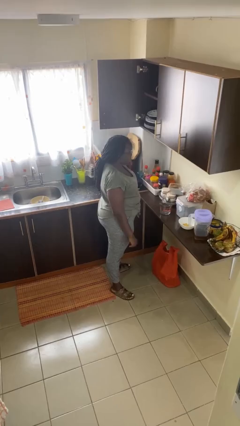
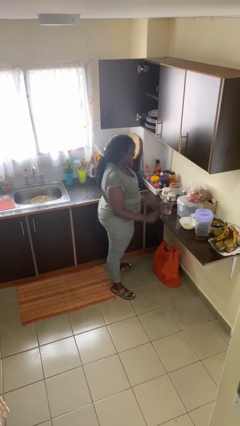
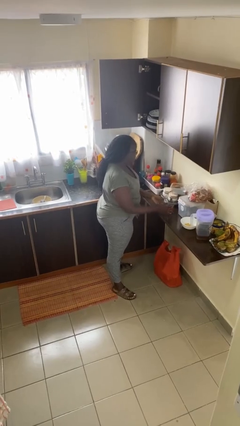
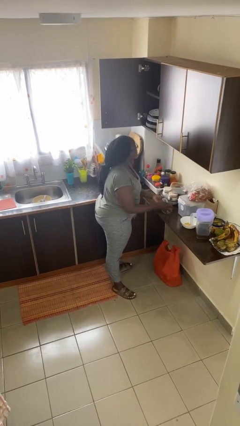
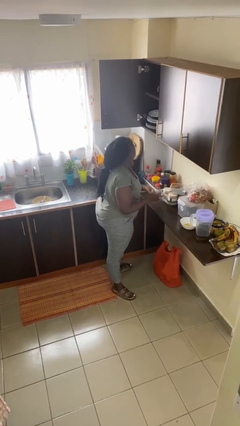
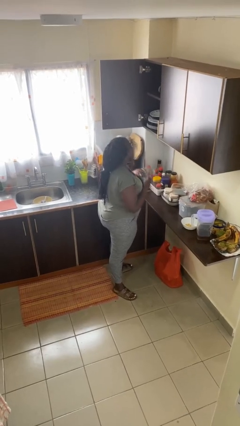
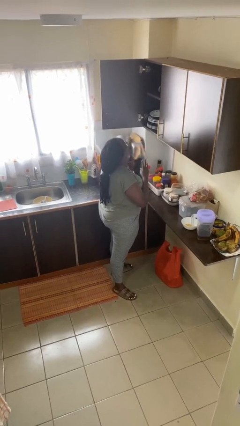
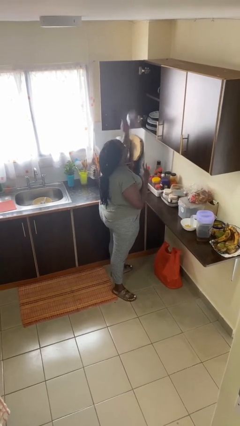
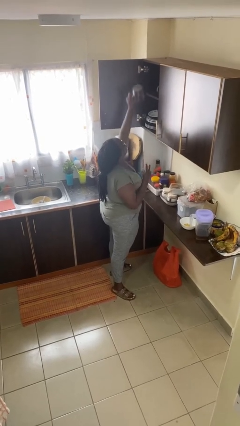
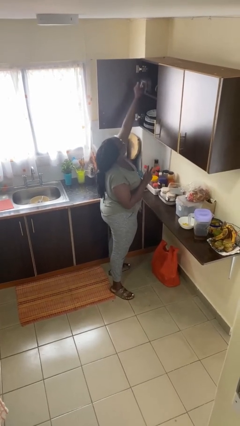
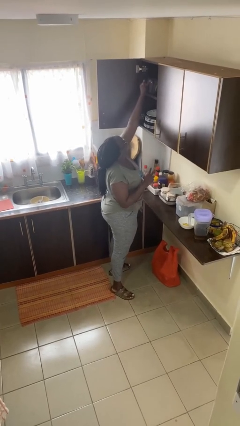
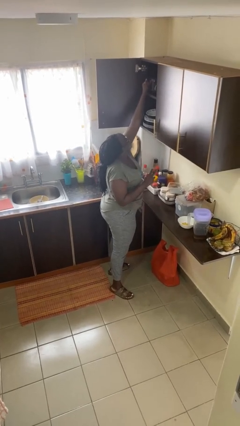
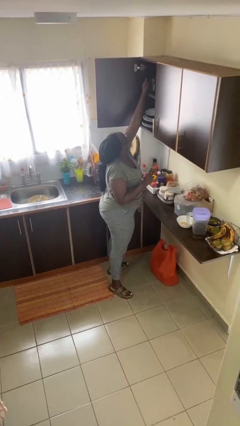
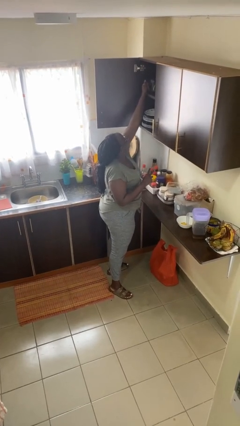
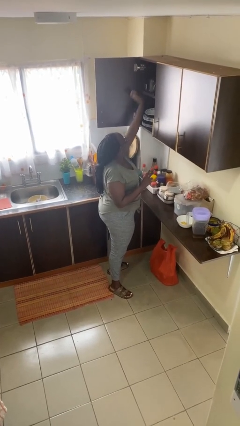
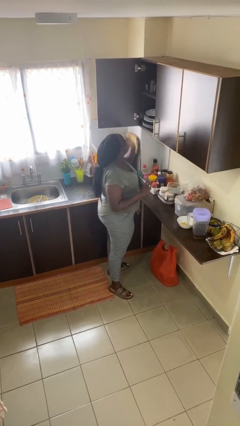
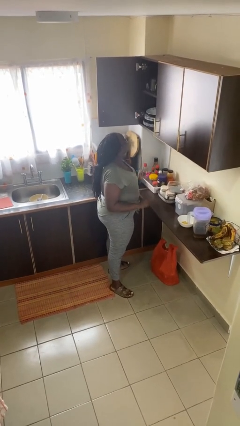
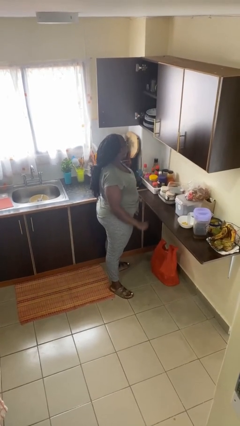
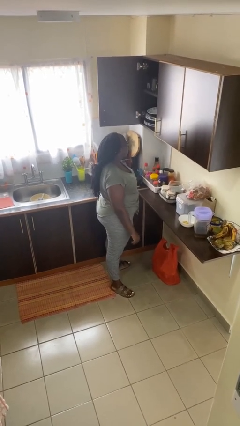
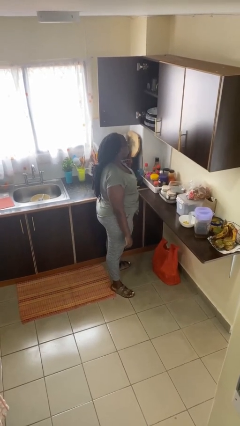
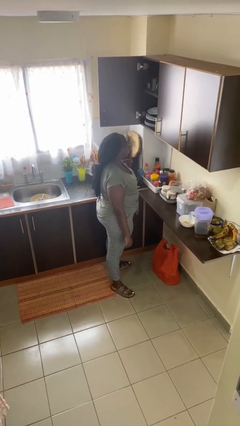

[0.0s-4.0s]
person puts object in cabinet

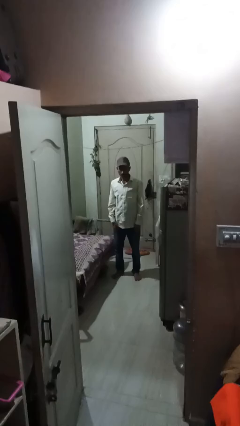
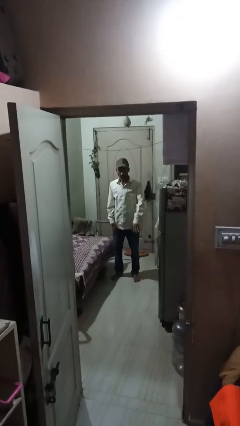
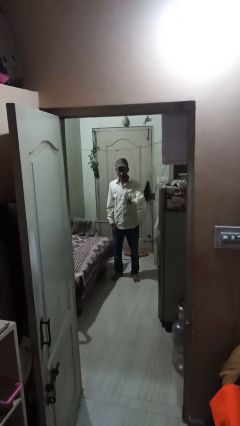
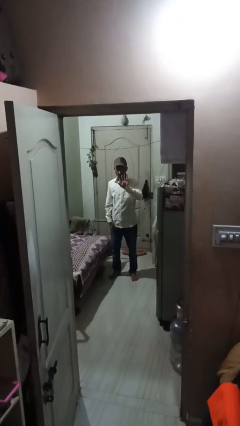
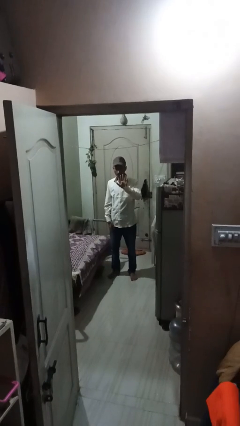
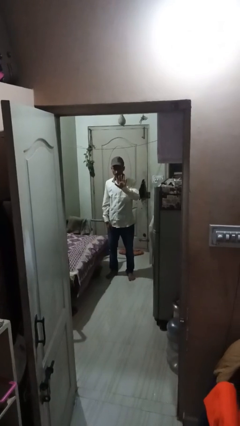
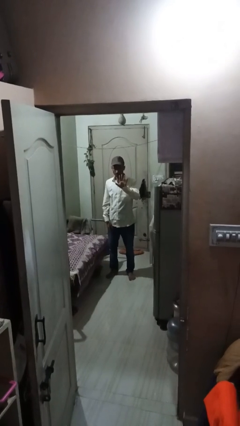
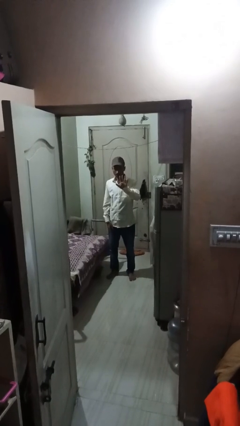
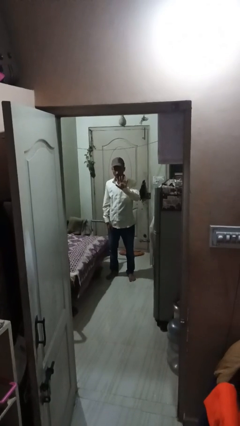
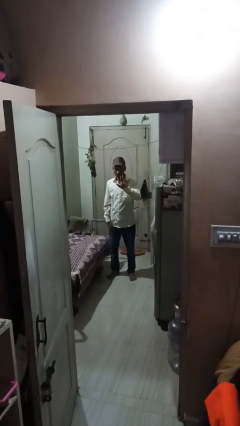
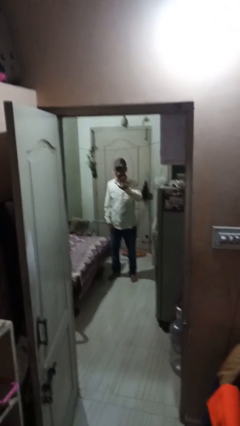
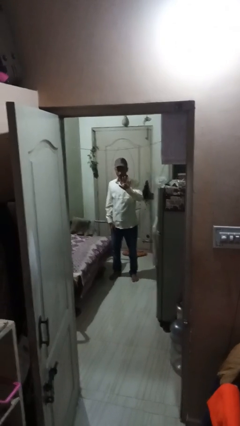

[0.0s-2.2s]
person gestures number five

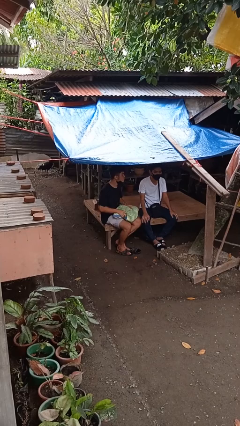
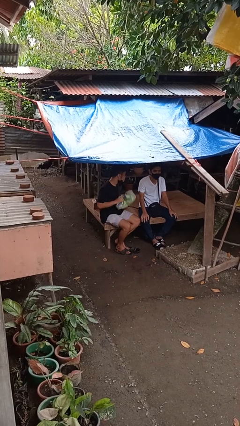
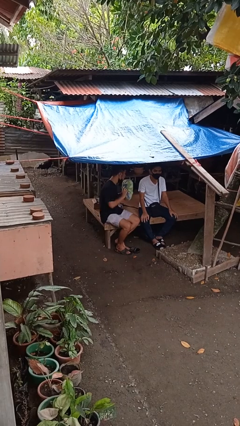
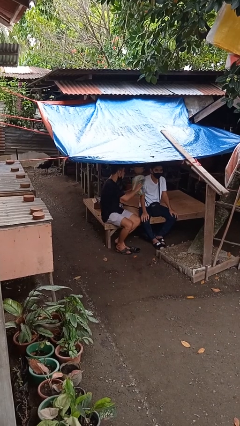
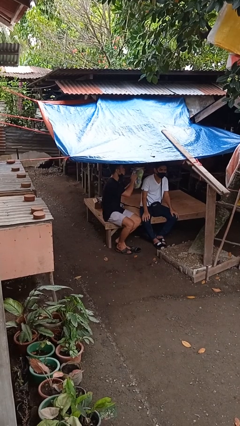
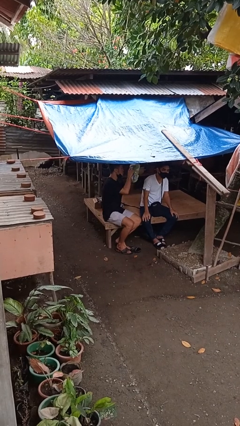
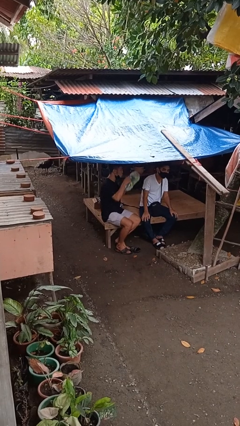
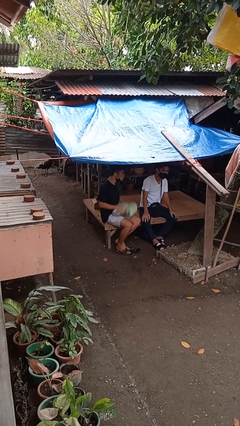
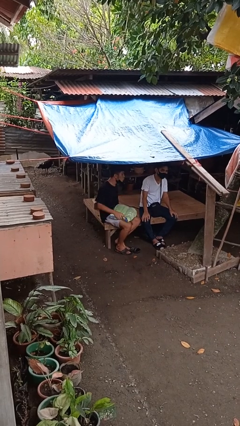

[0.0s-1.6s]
person hits person with pillow

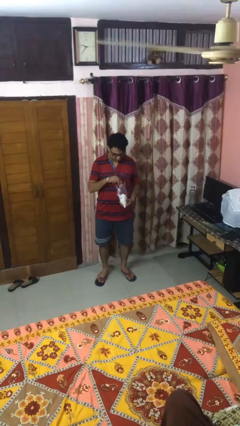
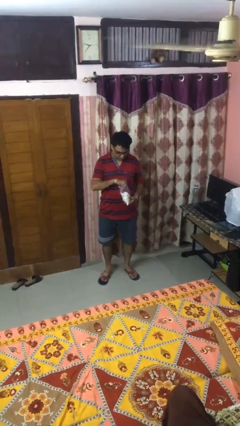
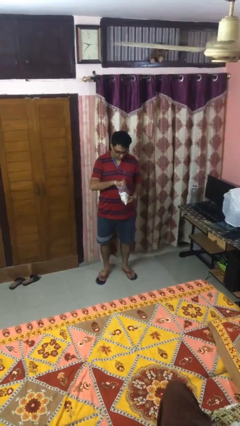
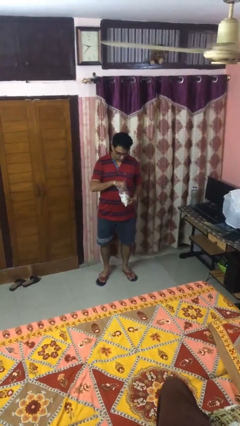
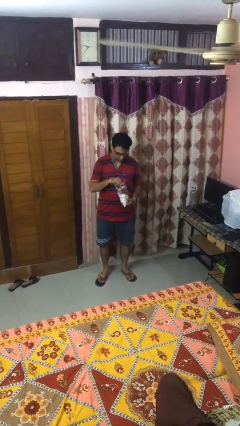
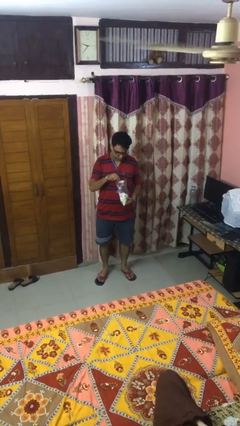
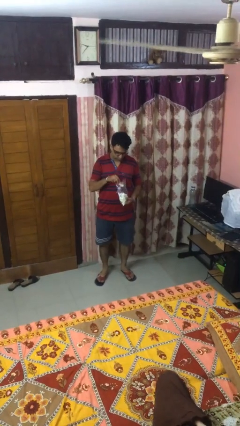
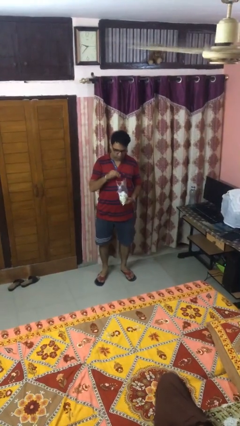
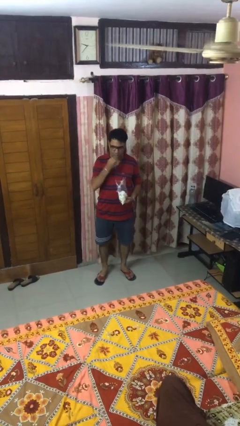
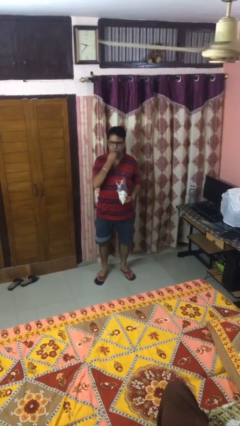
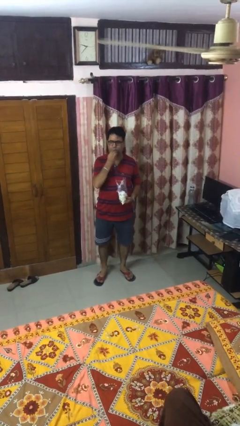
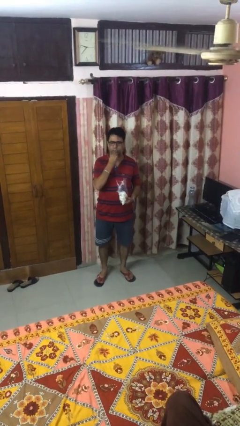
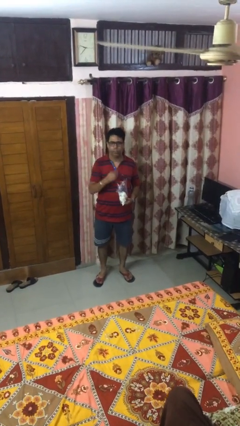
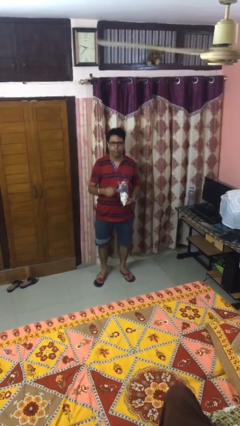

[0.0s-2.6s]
person eats snack from bag

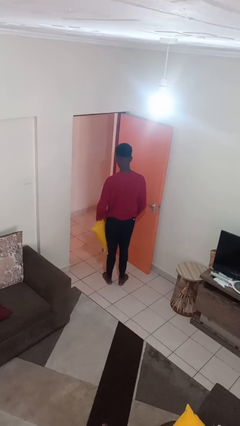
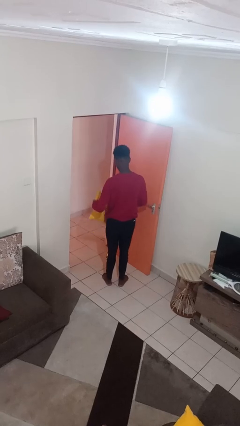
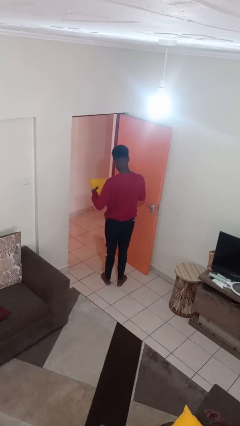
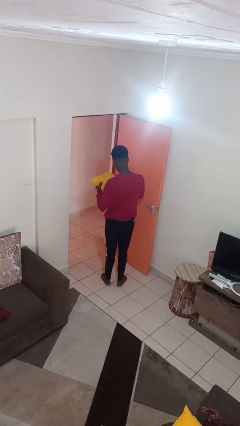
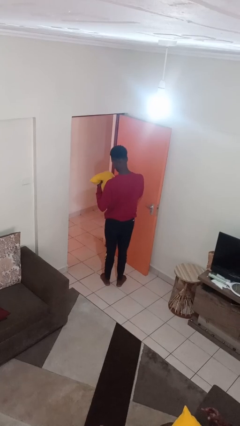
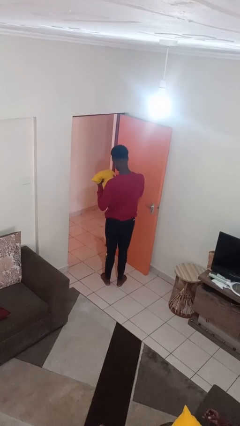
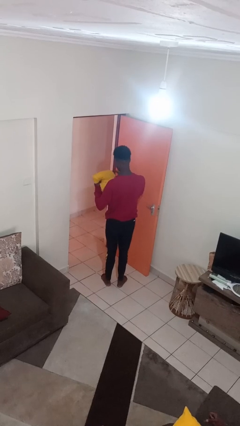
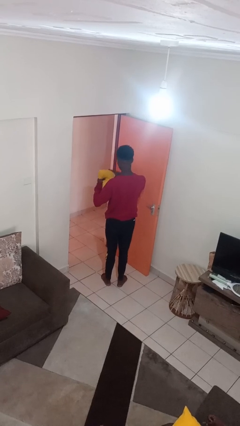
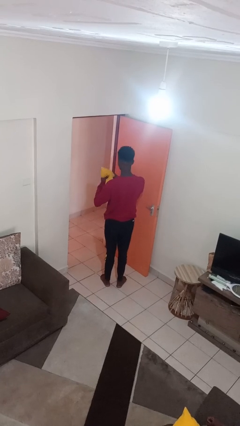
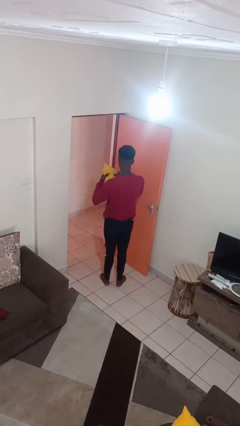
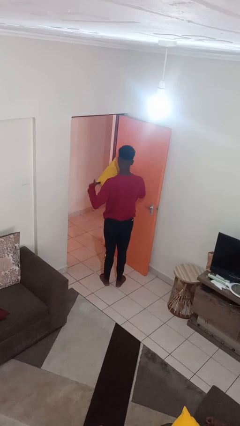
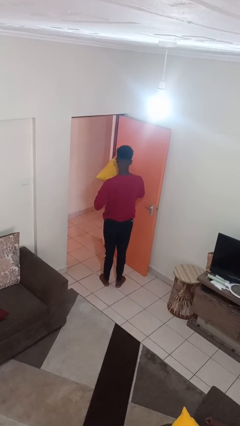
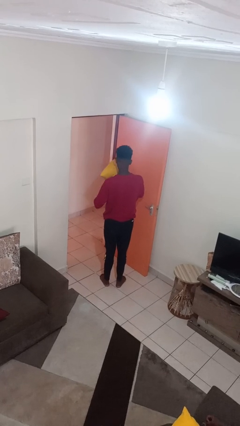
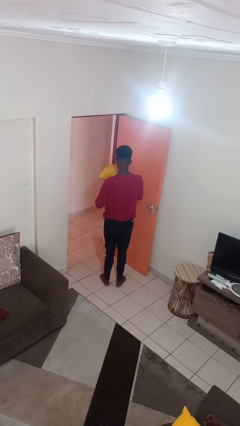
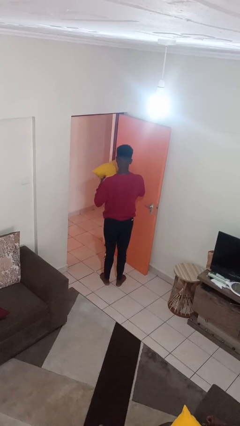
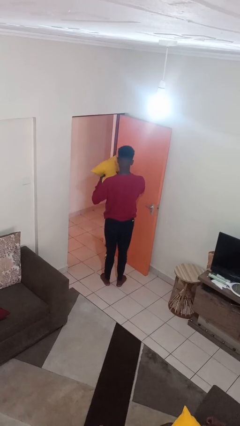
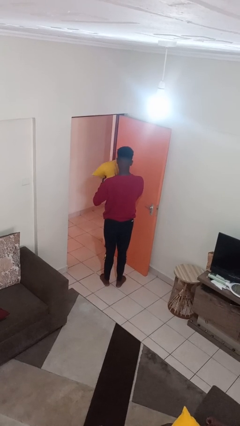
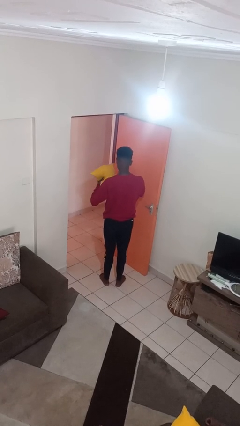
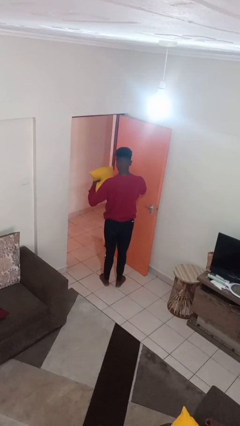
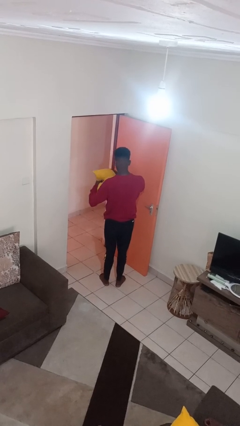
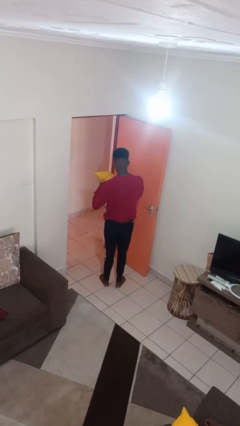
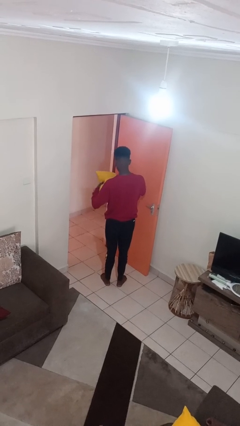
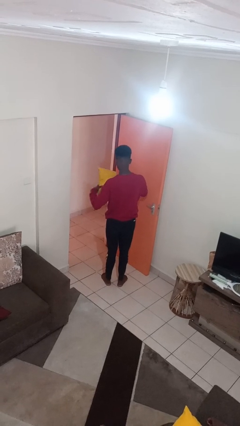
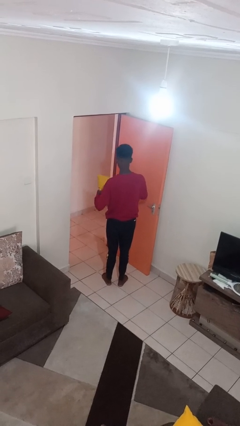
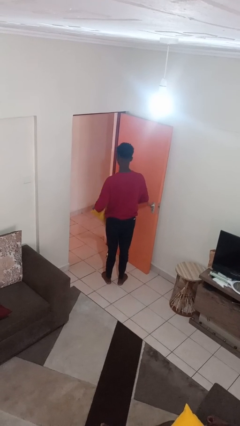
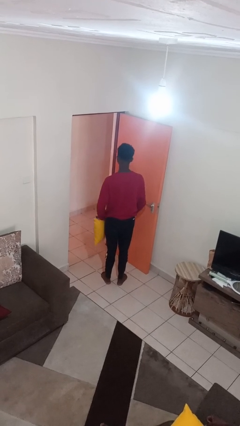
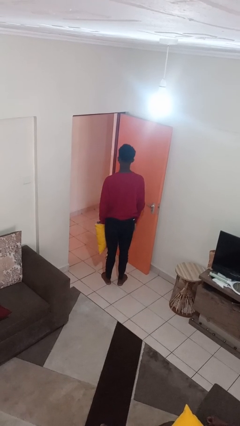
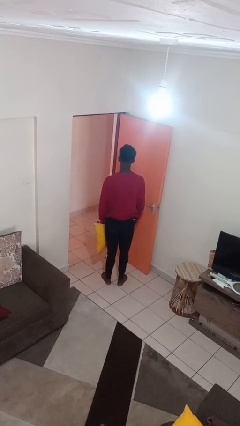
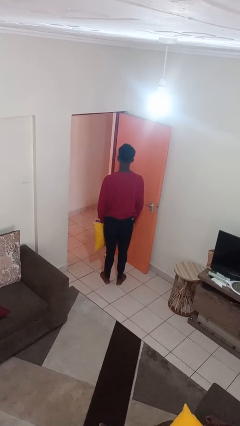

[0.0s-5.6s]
person squeezes object

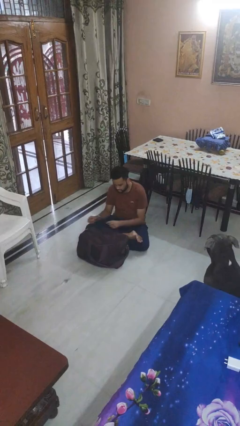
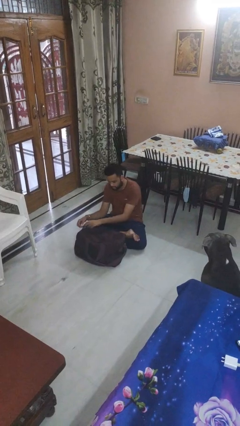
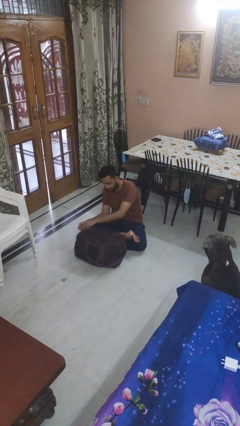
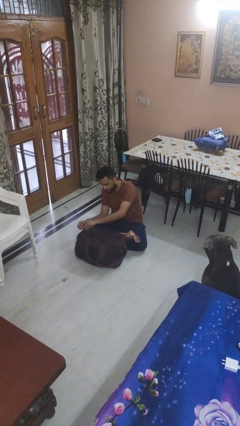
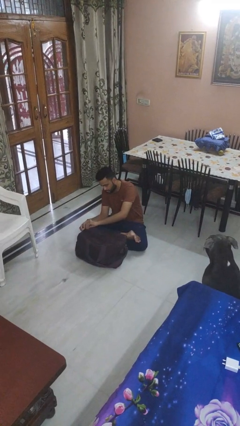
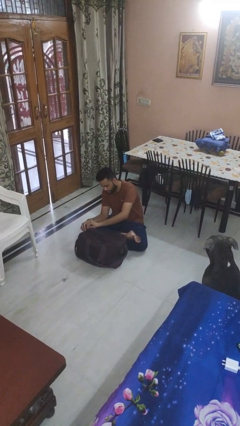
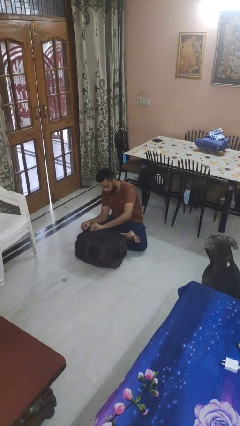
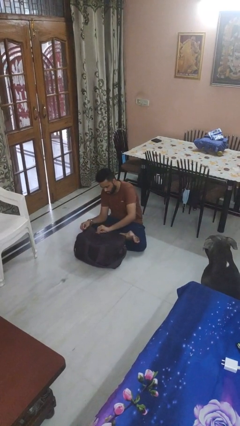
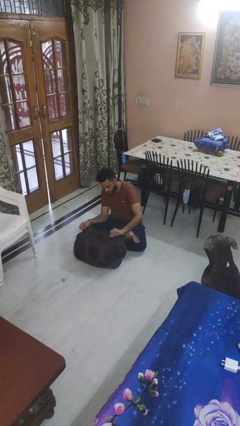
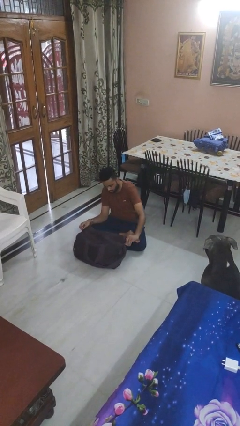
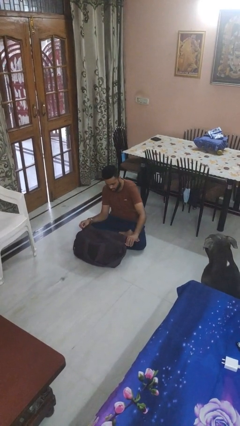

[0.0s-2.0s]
person closes suitcase
